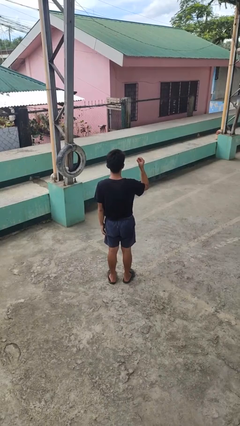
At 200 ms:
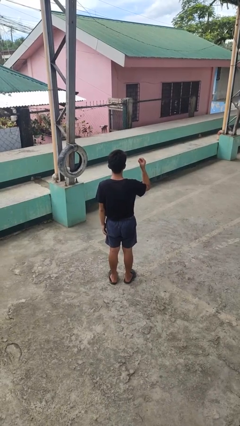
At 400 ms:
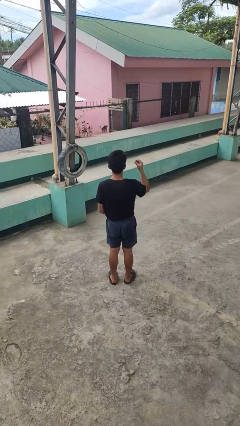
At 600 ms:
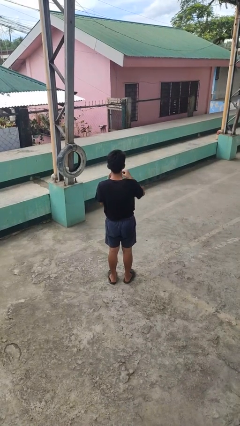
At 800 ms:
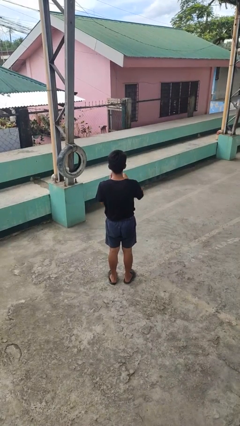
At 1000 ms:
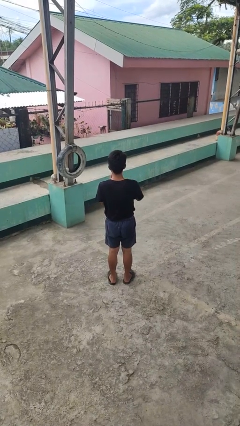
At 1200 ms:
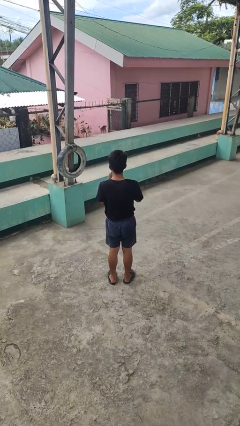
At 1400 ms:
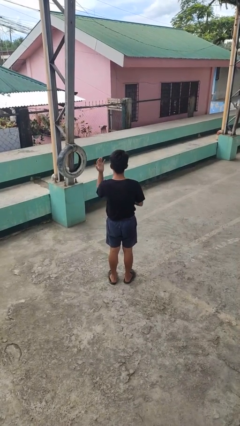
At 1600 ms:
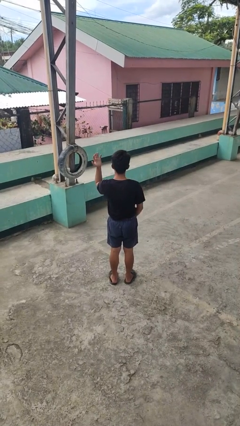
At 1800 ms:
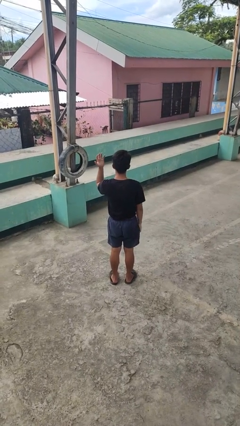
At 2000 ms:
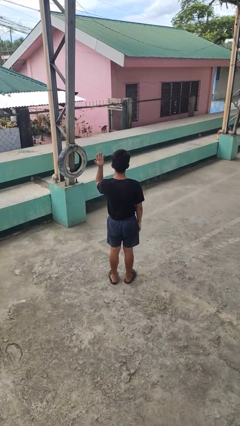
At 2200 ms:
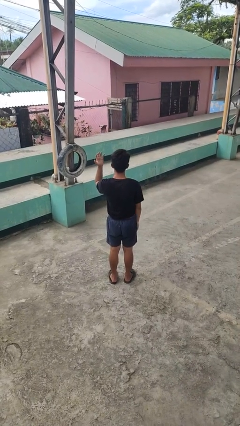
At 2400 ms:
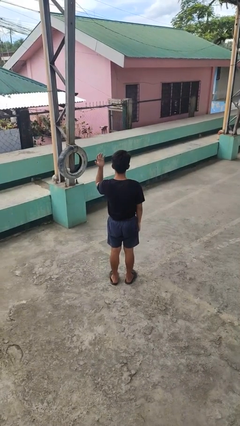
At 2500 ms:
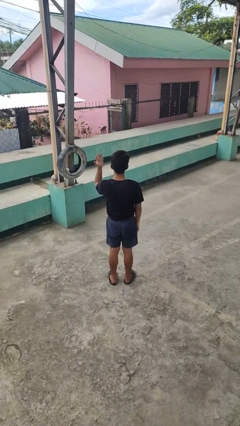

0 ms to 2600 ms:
person puts on ring

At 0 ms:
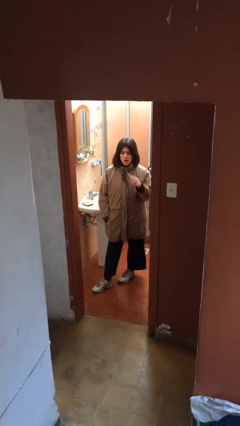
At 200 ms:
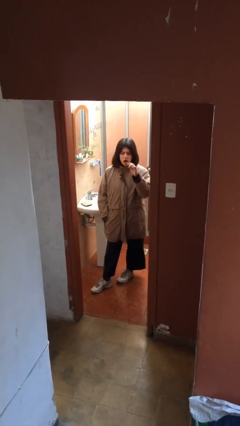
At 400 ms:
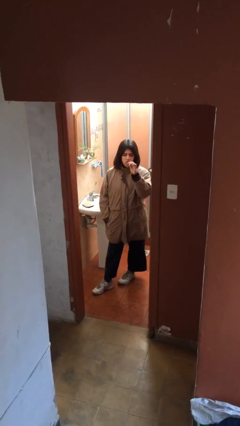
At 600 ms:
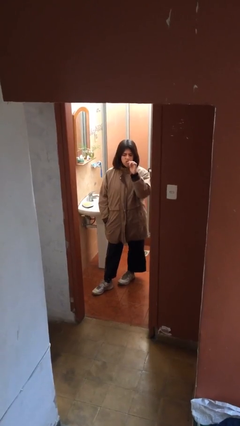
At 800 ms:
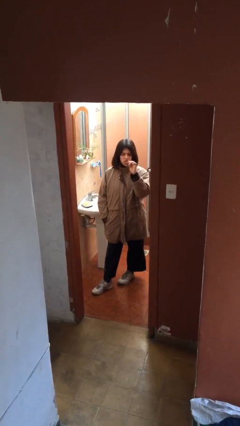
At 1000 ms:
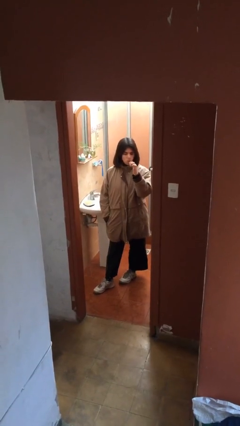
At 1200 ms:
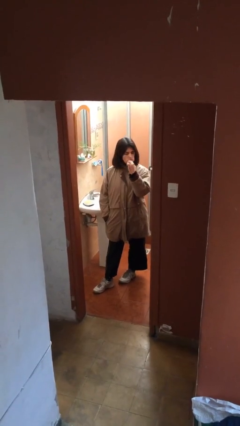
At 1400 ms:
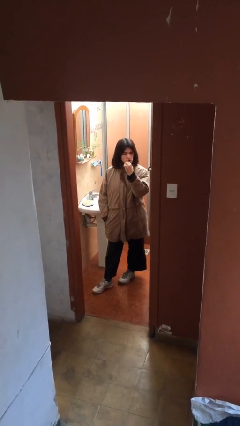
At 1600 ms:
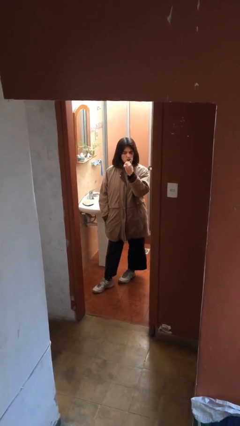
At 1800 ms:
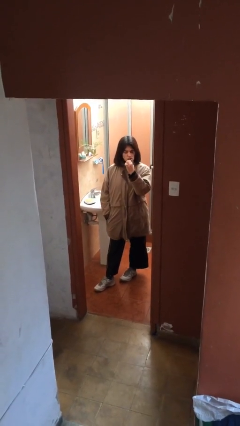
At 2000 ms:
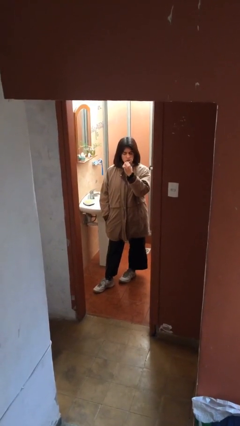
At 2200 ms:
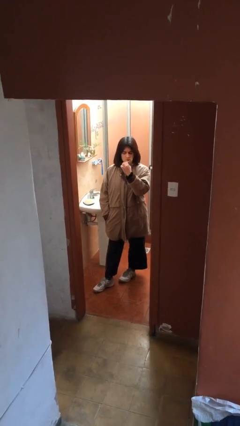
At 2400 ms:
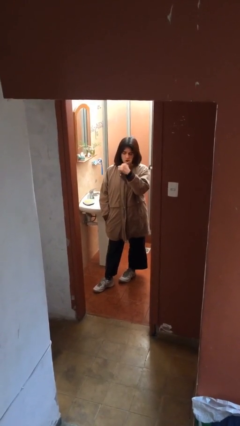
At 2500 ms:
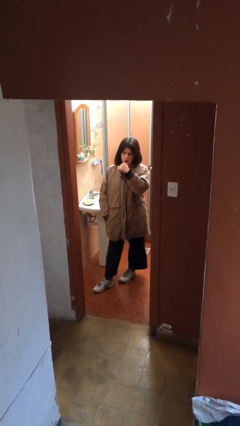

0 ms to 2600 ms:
person brushes teeth

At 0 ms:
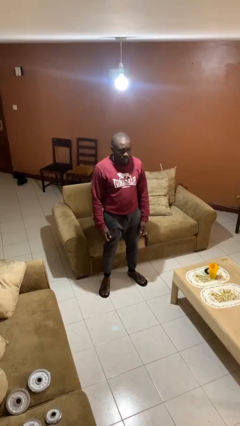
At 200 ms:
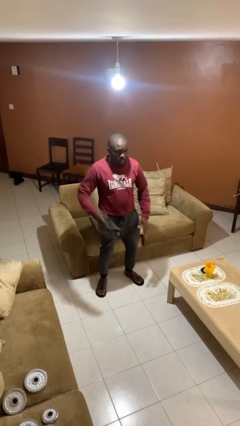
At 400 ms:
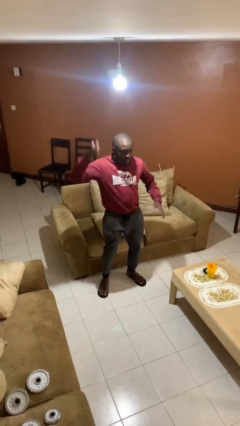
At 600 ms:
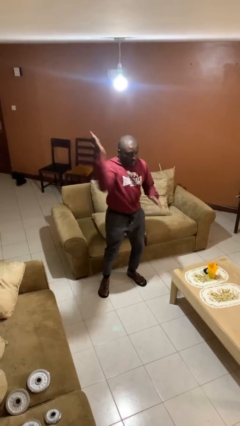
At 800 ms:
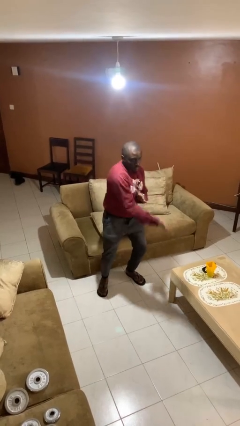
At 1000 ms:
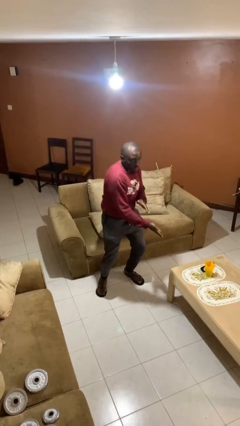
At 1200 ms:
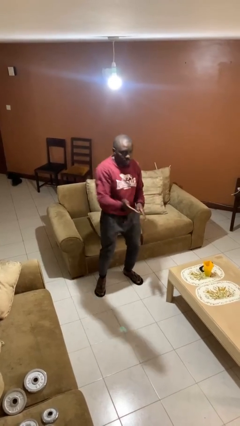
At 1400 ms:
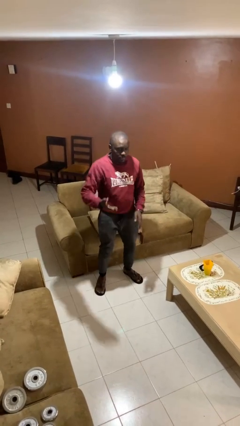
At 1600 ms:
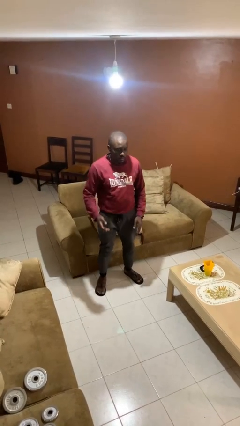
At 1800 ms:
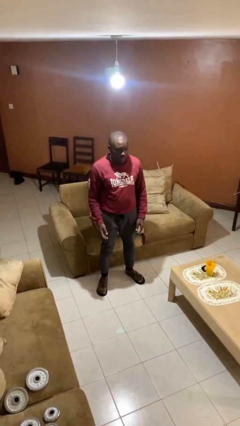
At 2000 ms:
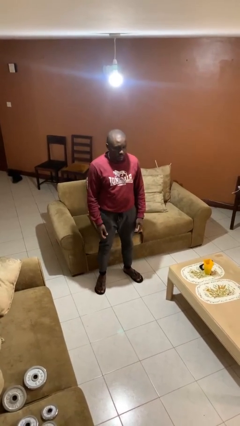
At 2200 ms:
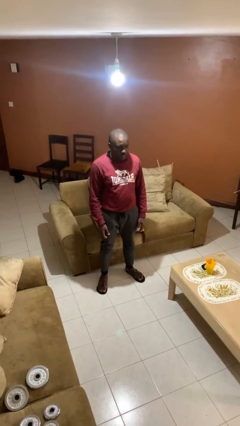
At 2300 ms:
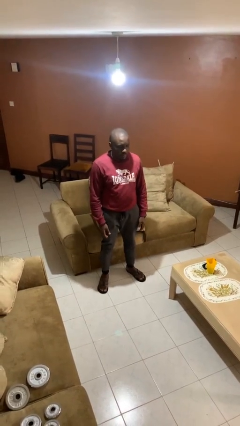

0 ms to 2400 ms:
person karate chop

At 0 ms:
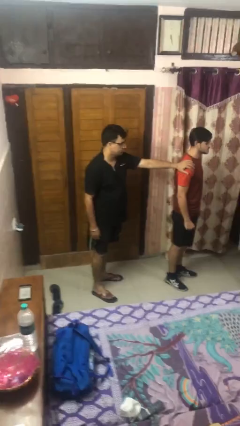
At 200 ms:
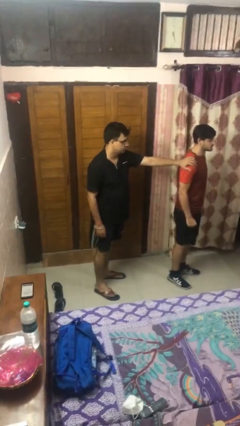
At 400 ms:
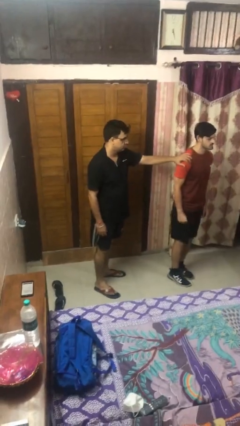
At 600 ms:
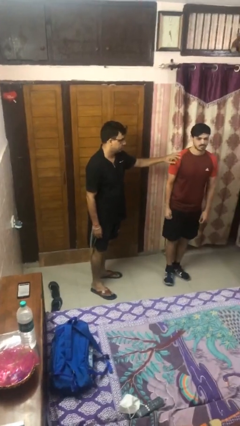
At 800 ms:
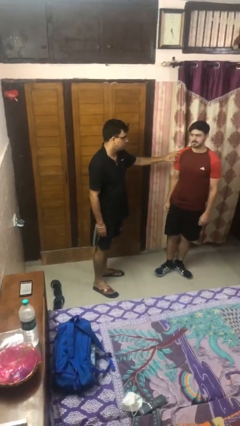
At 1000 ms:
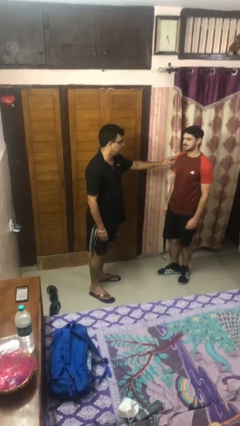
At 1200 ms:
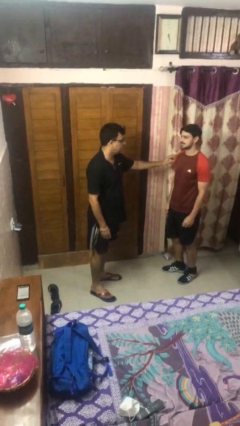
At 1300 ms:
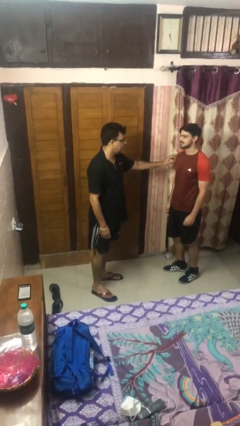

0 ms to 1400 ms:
person spins person around

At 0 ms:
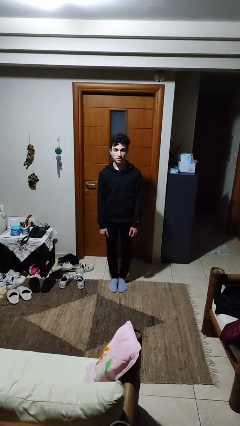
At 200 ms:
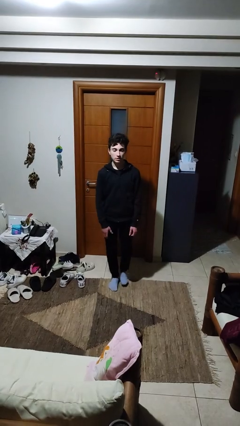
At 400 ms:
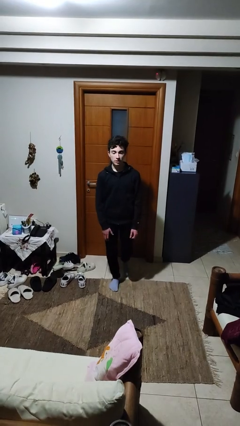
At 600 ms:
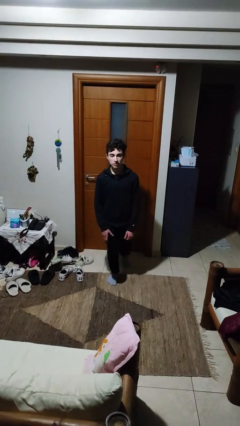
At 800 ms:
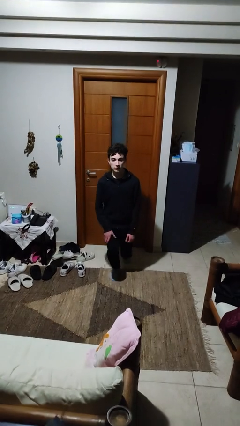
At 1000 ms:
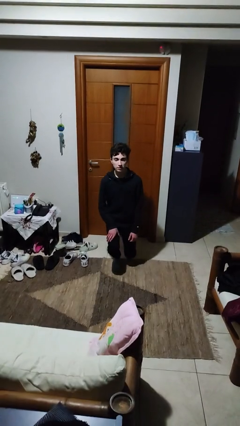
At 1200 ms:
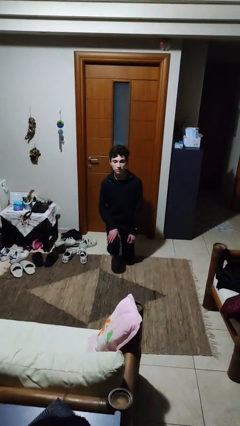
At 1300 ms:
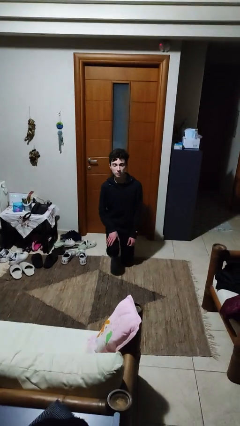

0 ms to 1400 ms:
person kneels

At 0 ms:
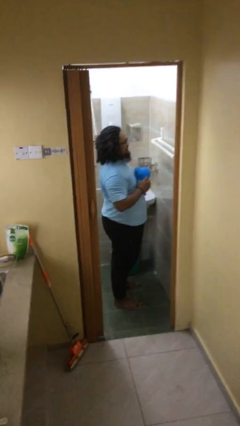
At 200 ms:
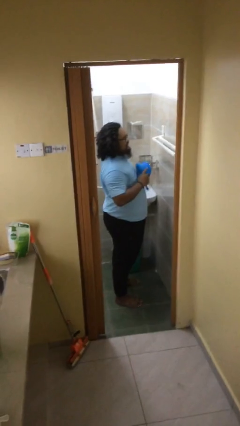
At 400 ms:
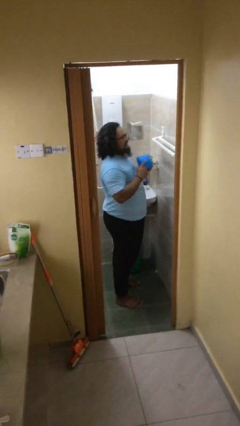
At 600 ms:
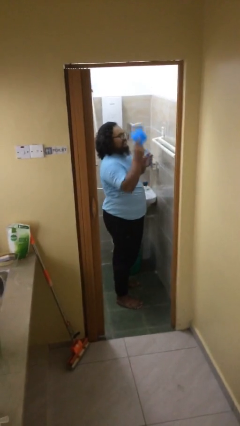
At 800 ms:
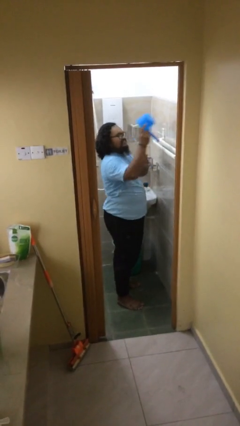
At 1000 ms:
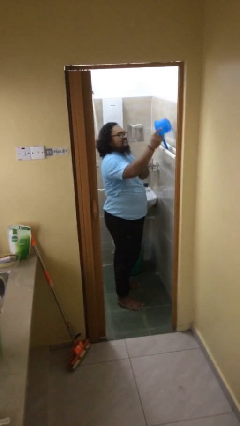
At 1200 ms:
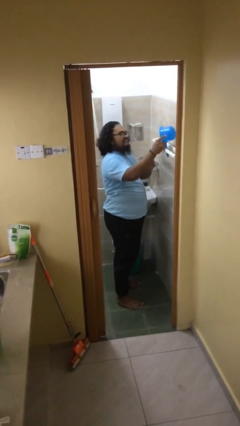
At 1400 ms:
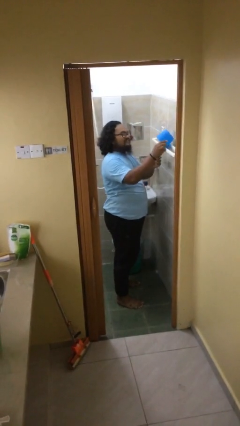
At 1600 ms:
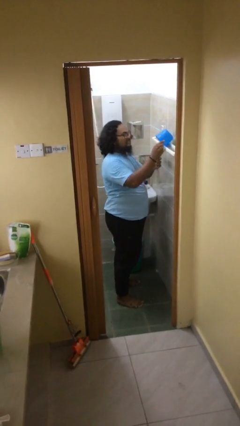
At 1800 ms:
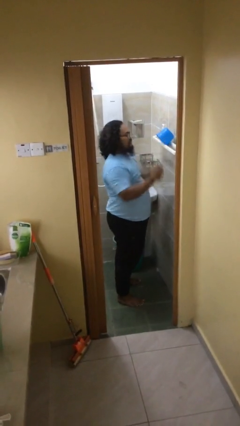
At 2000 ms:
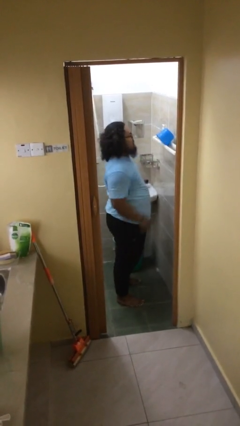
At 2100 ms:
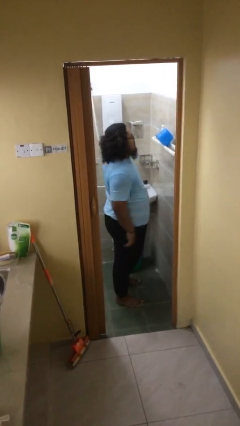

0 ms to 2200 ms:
person puts down object on countertop

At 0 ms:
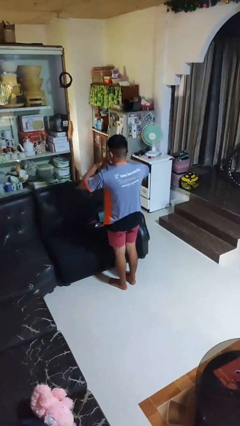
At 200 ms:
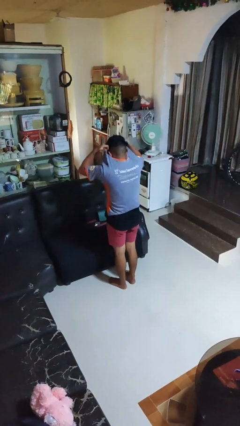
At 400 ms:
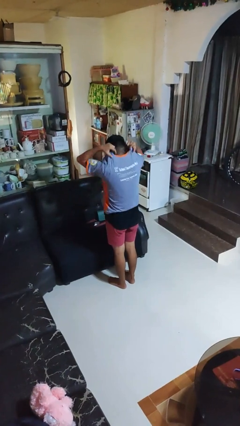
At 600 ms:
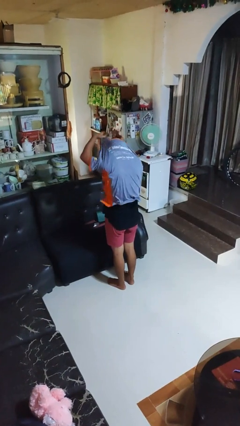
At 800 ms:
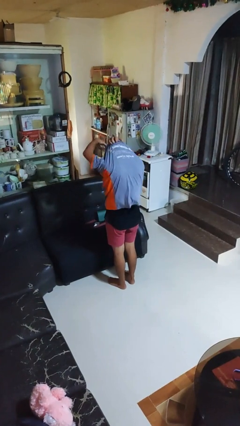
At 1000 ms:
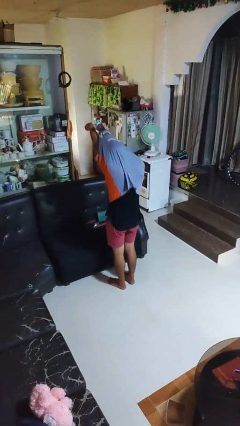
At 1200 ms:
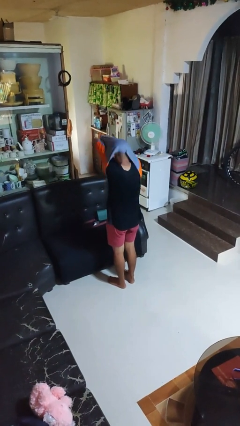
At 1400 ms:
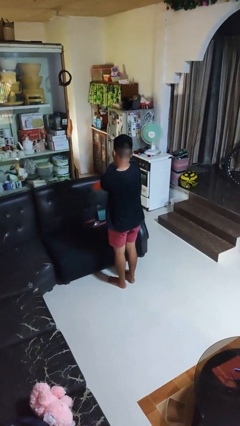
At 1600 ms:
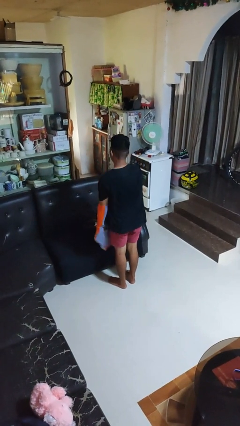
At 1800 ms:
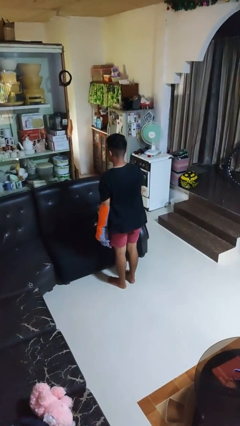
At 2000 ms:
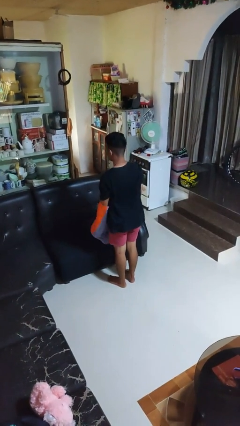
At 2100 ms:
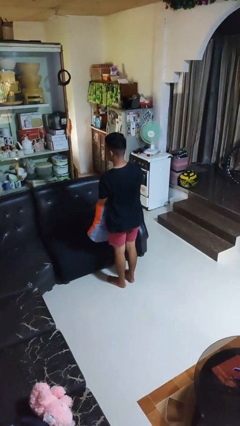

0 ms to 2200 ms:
person takes off shirt

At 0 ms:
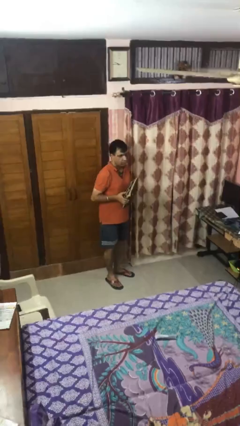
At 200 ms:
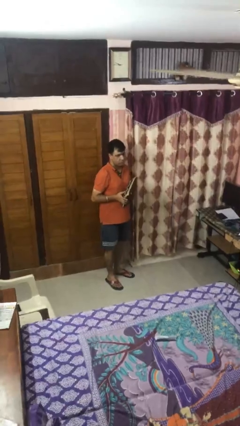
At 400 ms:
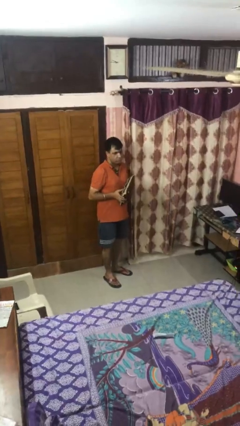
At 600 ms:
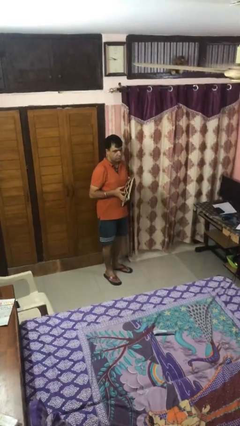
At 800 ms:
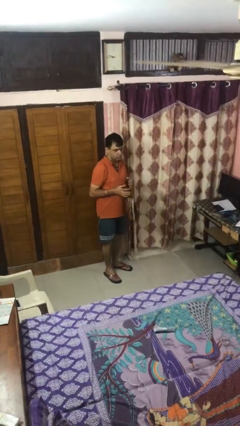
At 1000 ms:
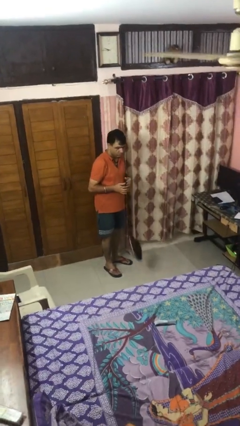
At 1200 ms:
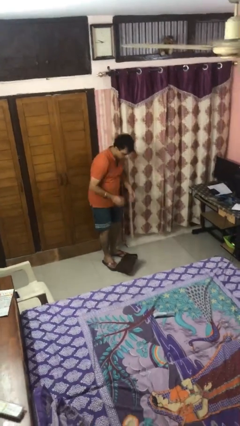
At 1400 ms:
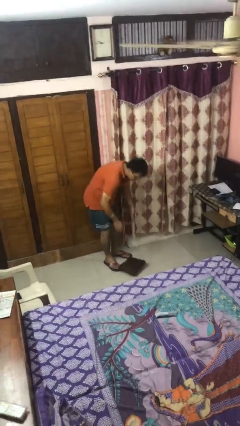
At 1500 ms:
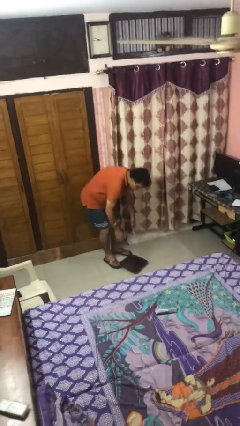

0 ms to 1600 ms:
person drops object

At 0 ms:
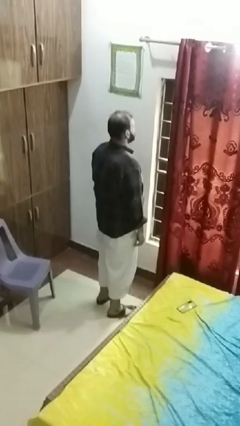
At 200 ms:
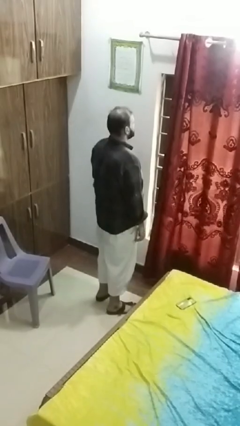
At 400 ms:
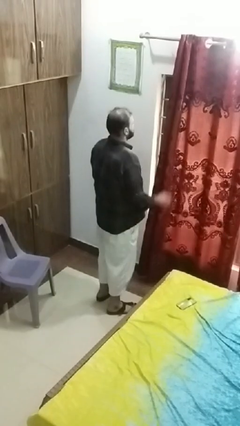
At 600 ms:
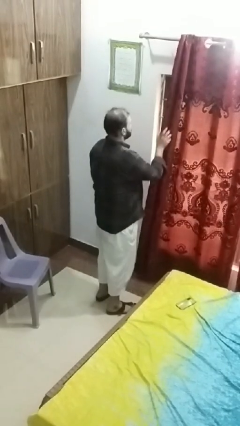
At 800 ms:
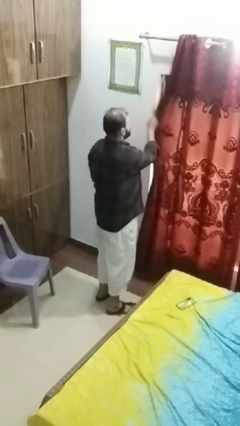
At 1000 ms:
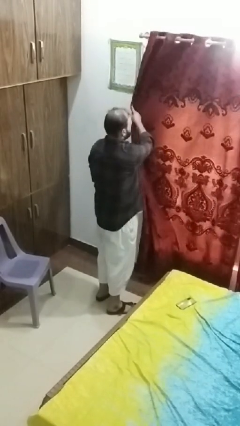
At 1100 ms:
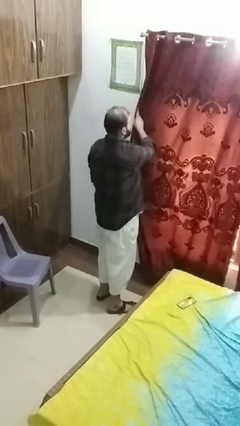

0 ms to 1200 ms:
person closes curtains
